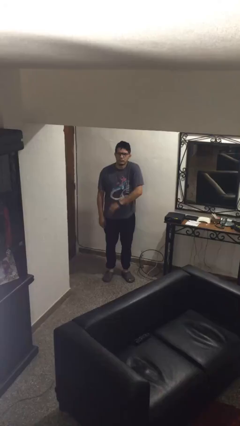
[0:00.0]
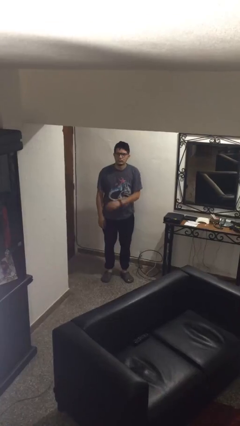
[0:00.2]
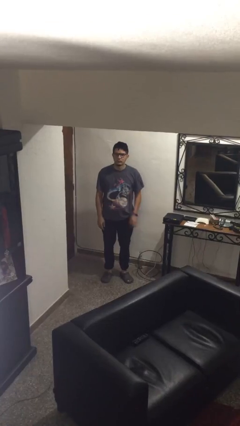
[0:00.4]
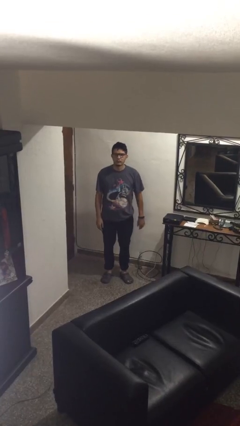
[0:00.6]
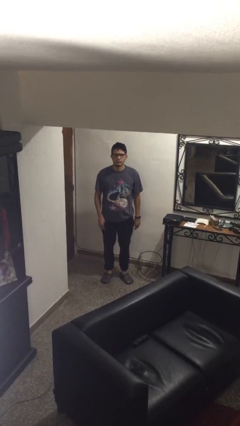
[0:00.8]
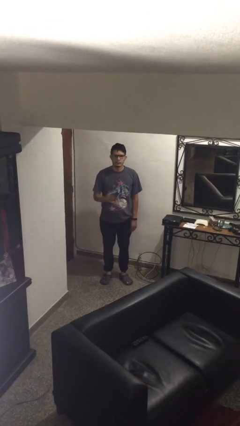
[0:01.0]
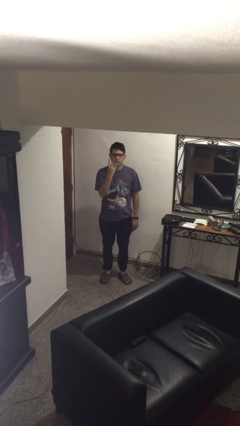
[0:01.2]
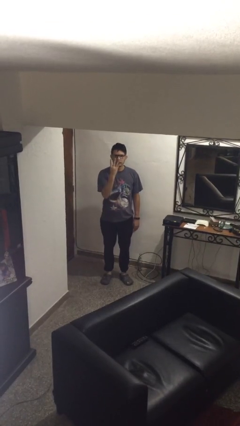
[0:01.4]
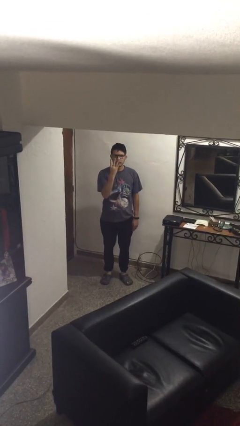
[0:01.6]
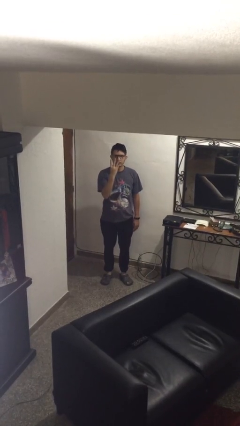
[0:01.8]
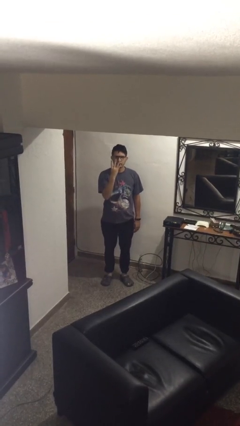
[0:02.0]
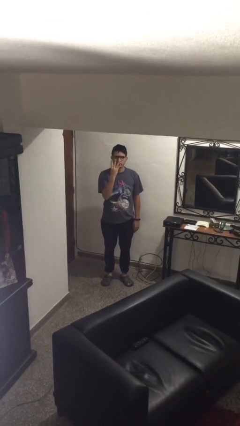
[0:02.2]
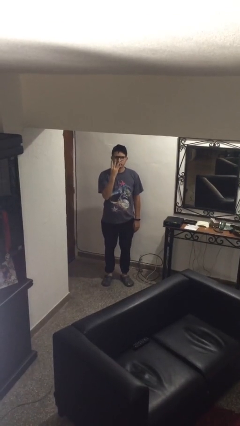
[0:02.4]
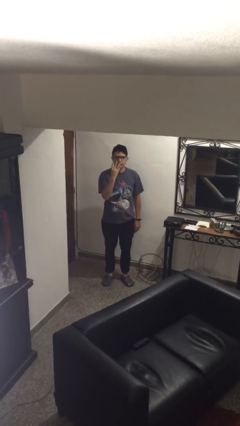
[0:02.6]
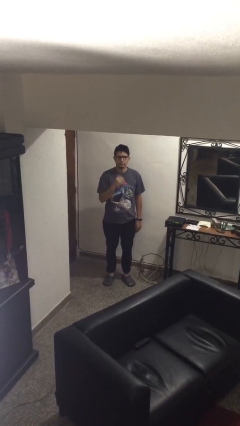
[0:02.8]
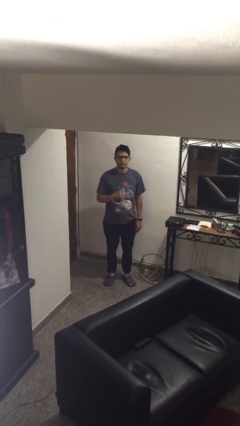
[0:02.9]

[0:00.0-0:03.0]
person gestures number four

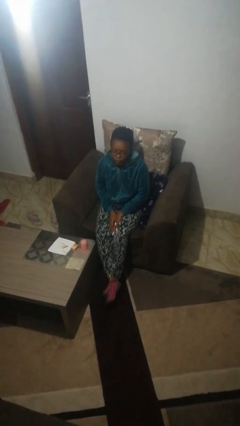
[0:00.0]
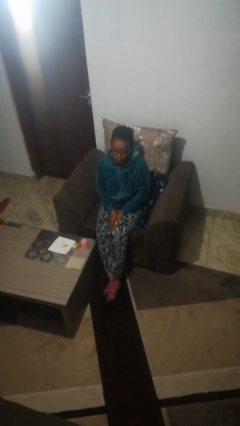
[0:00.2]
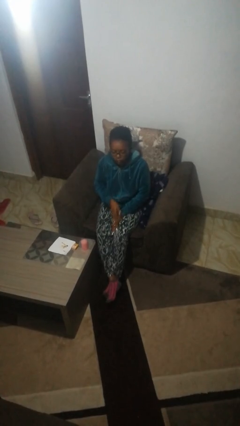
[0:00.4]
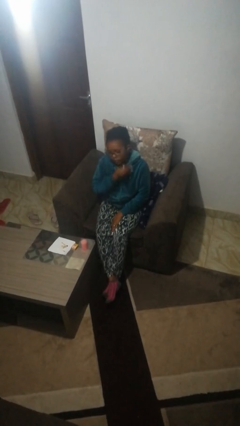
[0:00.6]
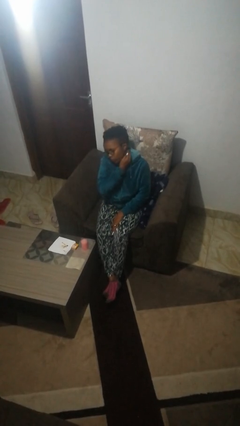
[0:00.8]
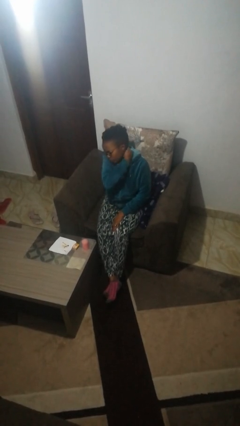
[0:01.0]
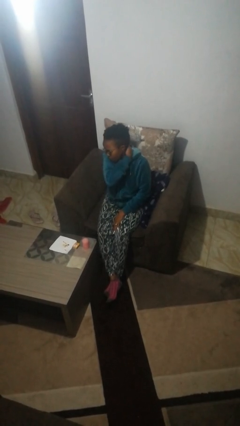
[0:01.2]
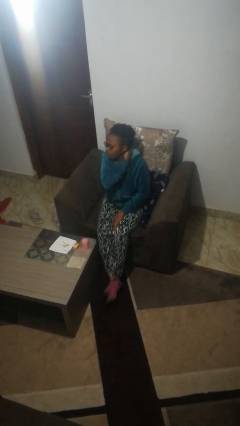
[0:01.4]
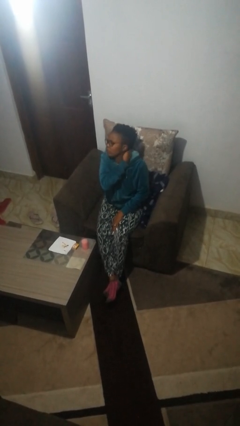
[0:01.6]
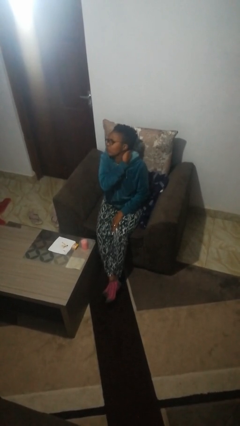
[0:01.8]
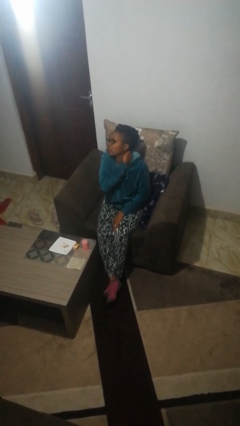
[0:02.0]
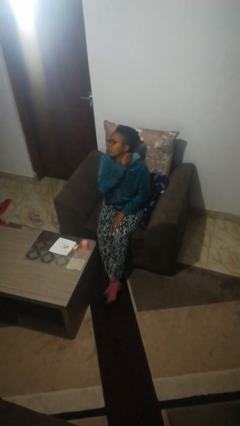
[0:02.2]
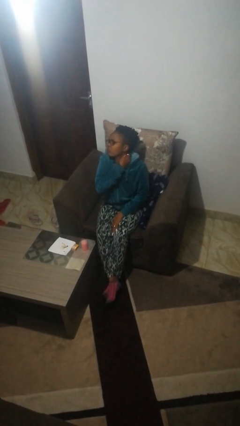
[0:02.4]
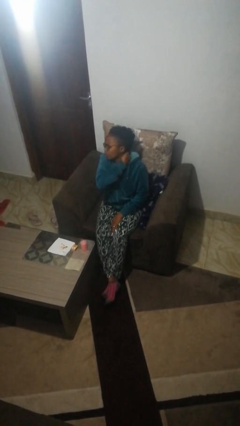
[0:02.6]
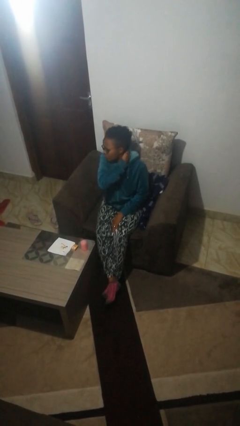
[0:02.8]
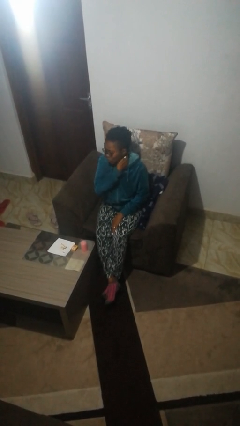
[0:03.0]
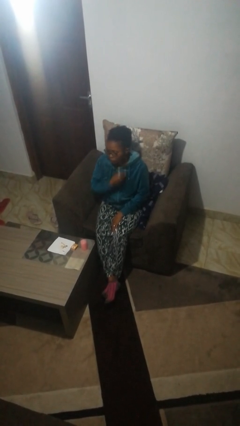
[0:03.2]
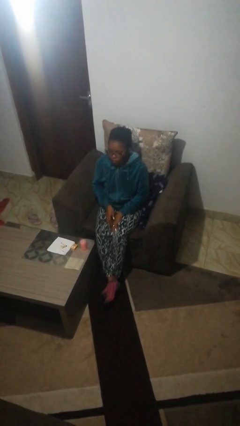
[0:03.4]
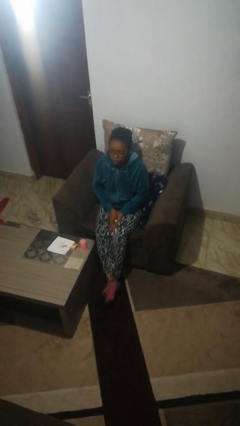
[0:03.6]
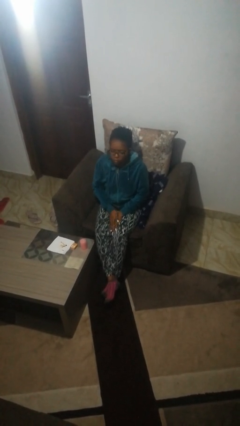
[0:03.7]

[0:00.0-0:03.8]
person rubs neck

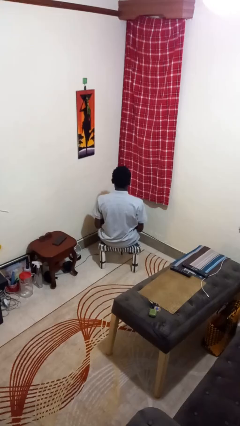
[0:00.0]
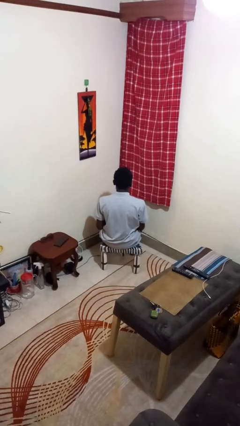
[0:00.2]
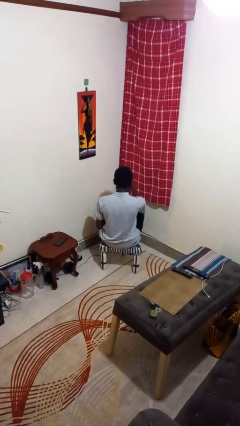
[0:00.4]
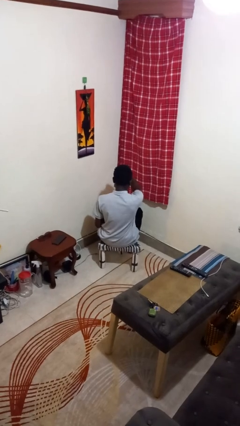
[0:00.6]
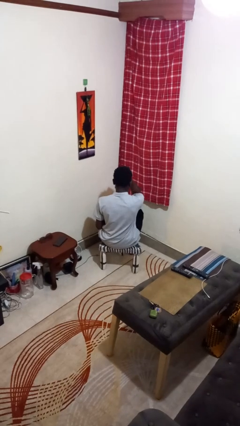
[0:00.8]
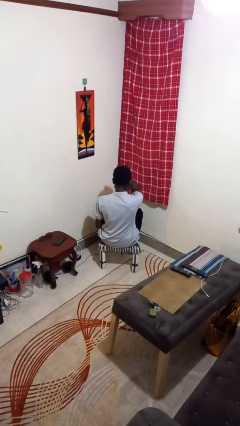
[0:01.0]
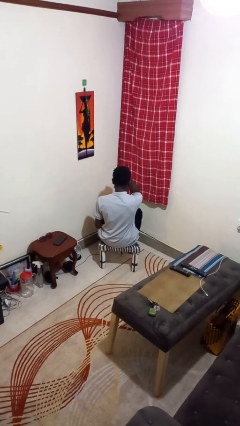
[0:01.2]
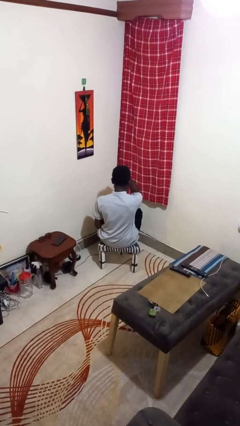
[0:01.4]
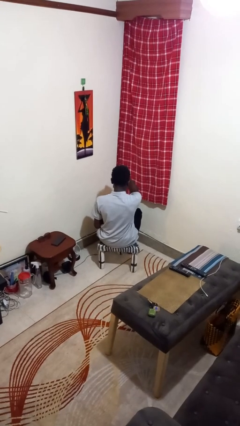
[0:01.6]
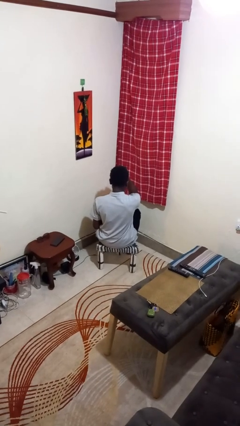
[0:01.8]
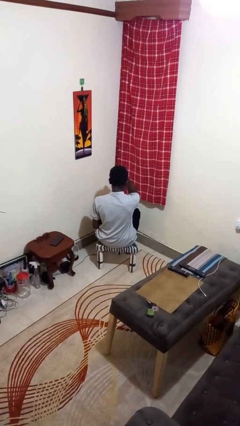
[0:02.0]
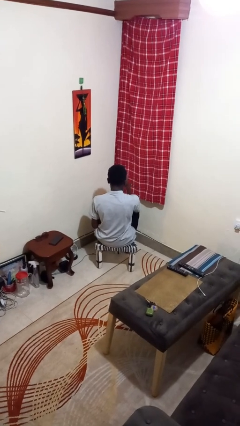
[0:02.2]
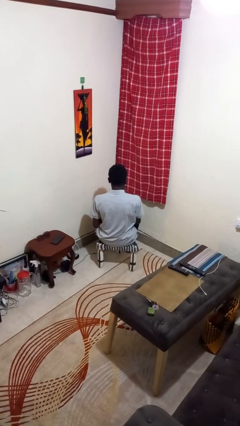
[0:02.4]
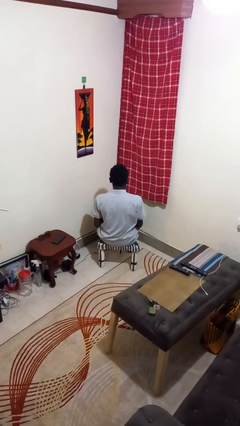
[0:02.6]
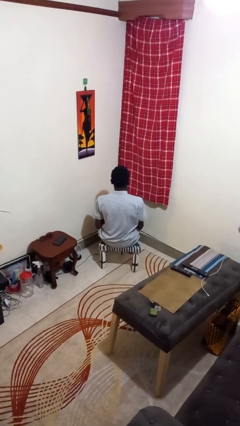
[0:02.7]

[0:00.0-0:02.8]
person scratches face

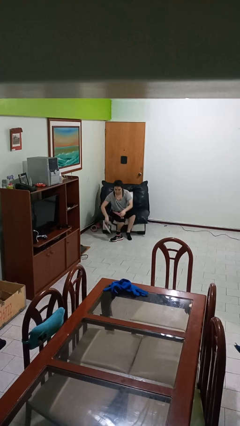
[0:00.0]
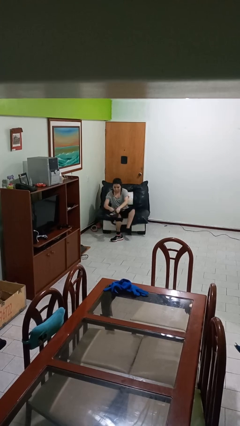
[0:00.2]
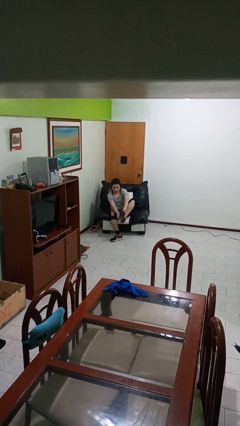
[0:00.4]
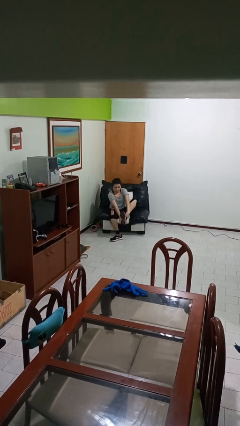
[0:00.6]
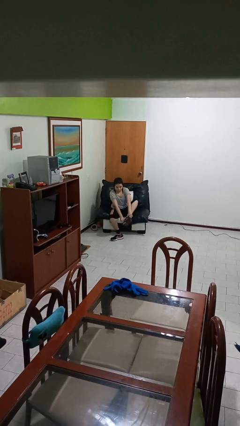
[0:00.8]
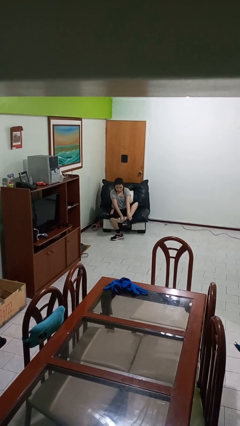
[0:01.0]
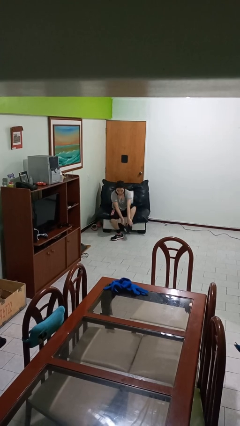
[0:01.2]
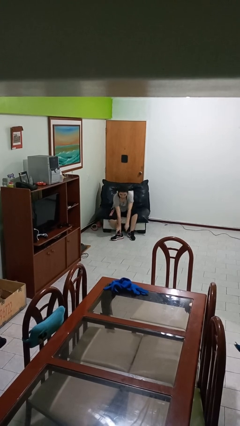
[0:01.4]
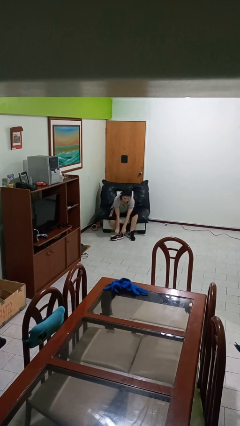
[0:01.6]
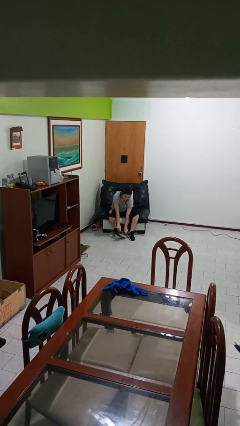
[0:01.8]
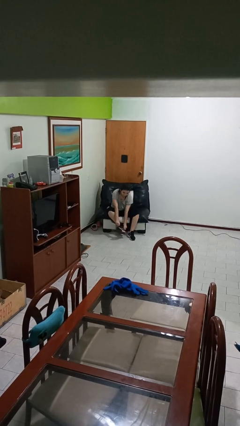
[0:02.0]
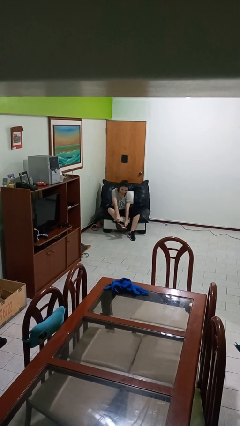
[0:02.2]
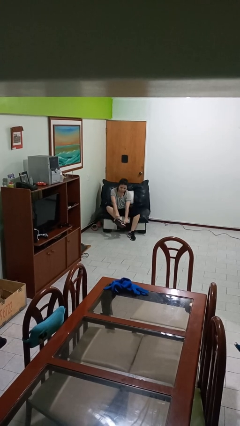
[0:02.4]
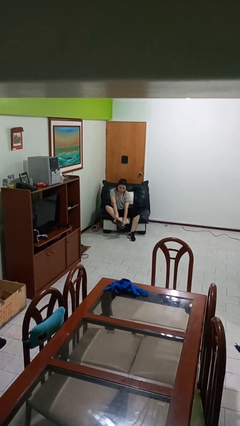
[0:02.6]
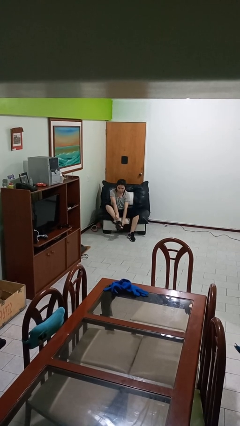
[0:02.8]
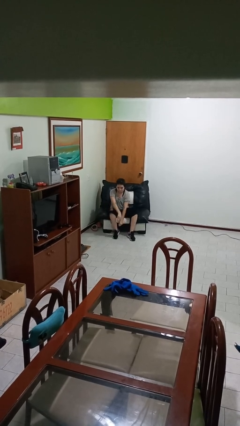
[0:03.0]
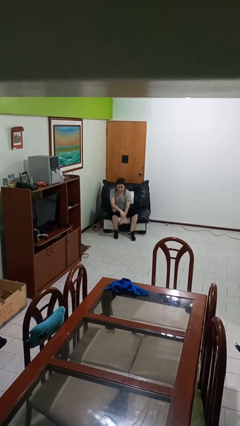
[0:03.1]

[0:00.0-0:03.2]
person puts on shoes

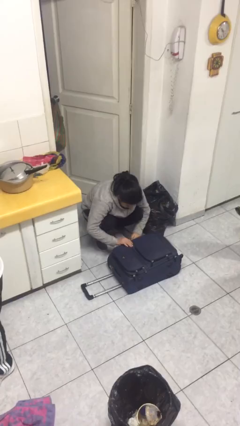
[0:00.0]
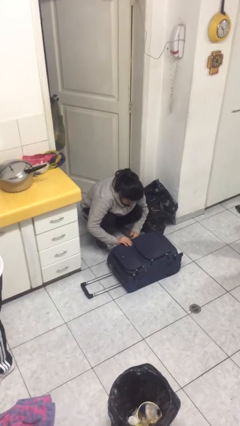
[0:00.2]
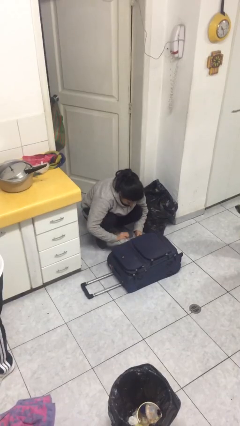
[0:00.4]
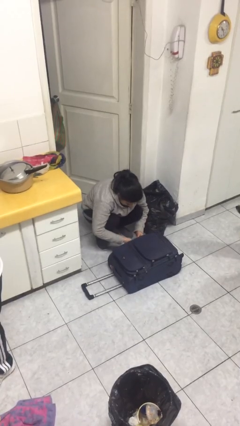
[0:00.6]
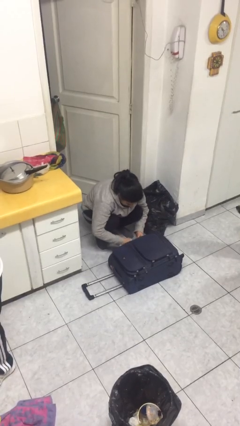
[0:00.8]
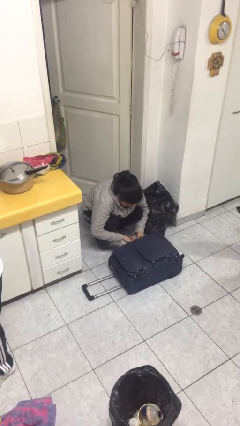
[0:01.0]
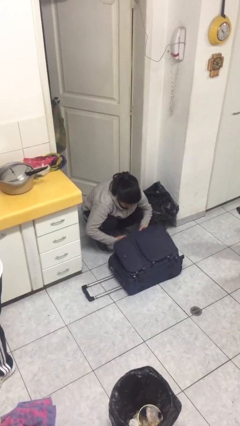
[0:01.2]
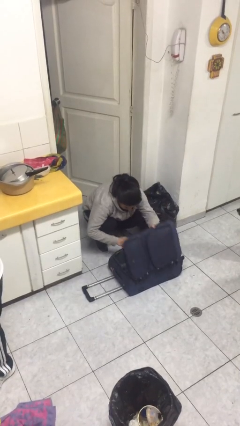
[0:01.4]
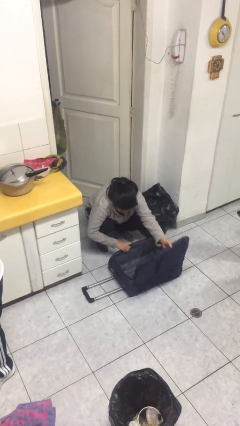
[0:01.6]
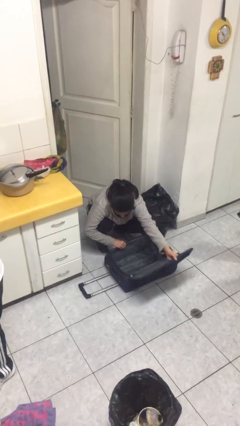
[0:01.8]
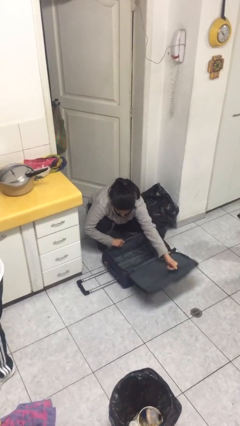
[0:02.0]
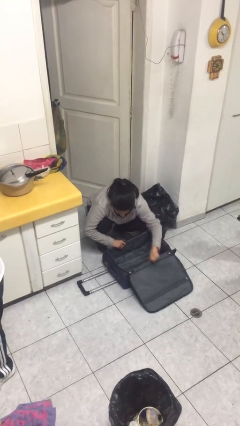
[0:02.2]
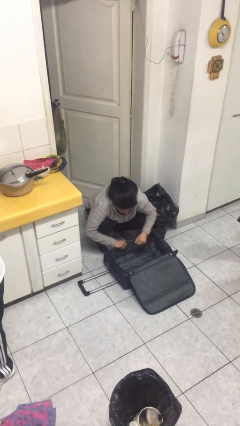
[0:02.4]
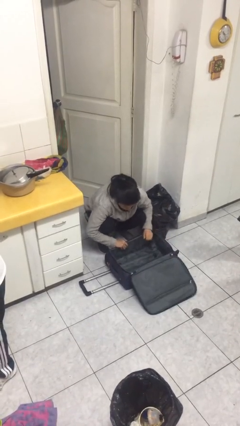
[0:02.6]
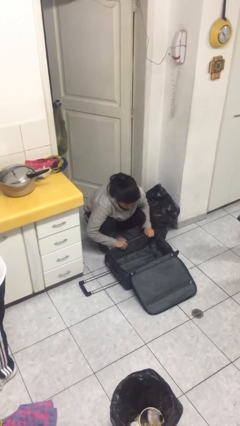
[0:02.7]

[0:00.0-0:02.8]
person opens suitcase

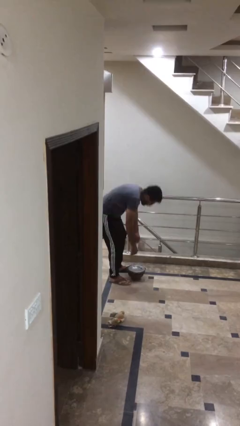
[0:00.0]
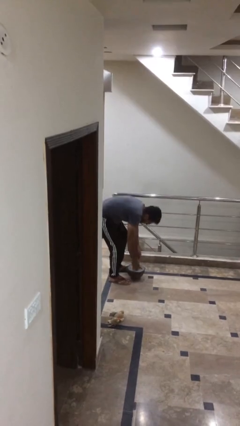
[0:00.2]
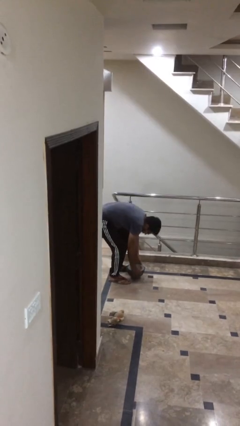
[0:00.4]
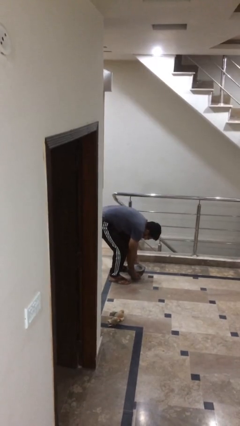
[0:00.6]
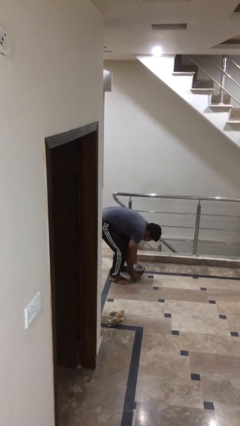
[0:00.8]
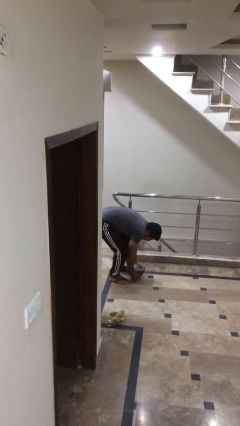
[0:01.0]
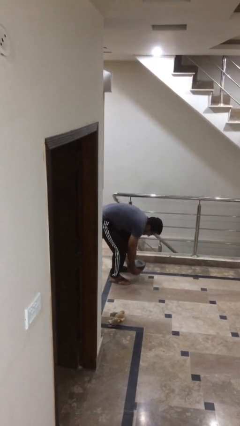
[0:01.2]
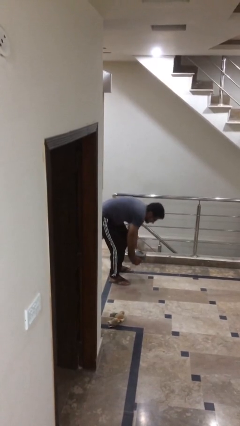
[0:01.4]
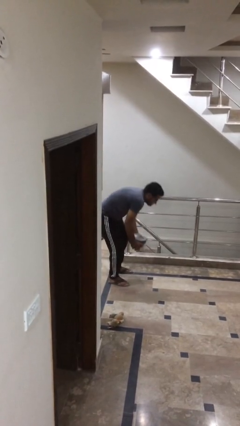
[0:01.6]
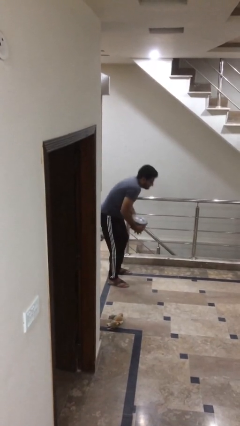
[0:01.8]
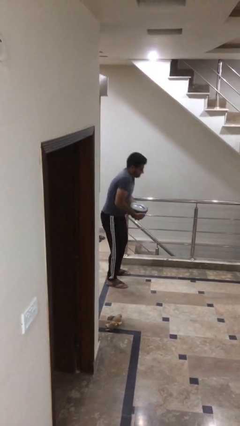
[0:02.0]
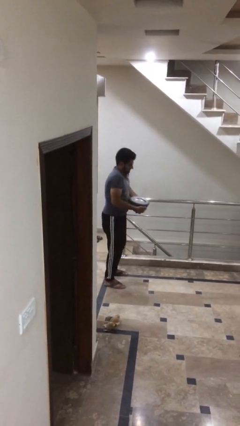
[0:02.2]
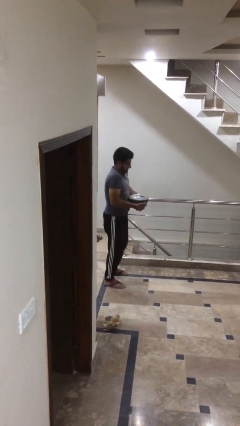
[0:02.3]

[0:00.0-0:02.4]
person picks up object from floor
